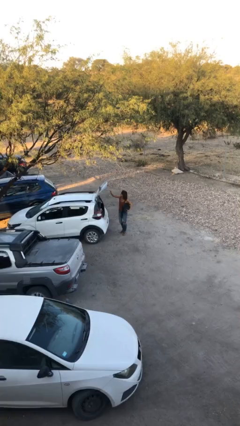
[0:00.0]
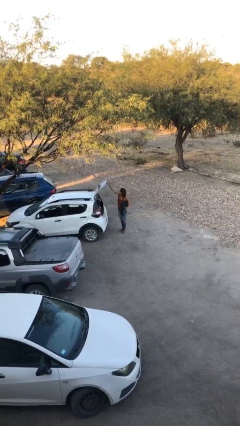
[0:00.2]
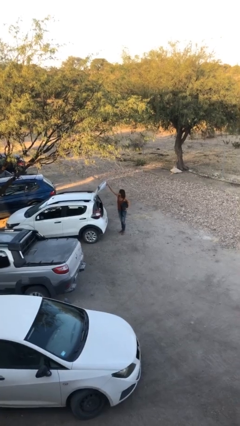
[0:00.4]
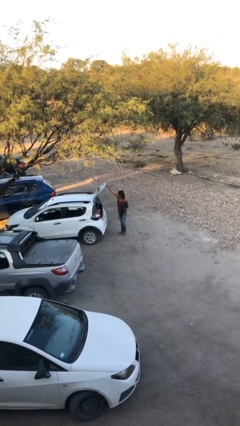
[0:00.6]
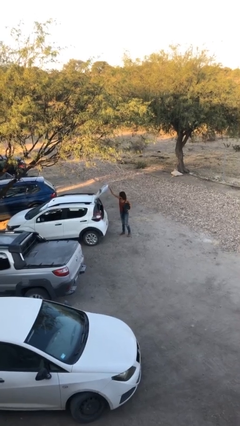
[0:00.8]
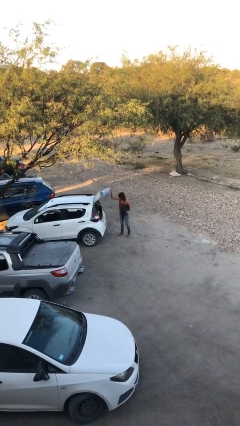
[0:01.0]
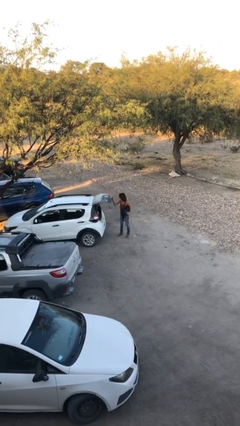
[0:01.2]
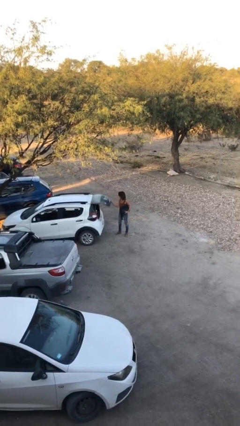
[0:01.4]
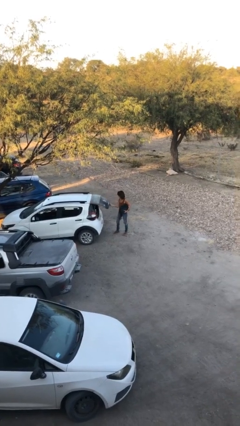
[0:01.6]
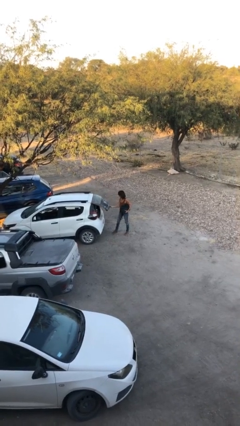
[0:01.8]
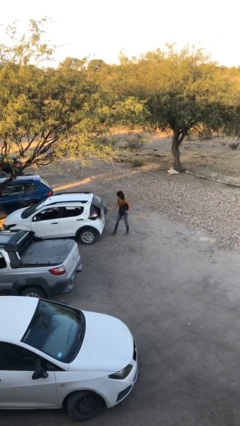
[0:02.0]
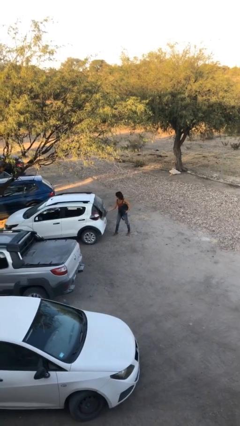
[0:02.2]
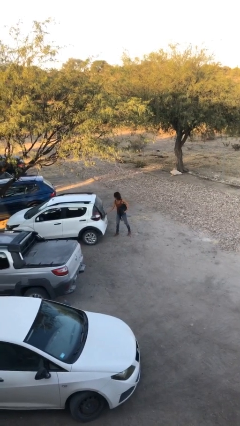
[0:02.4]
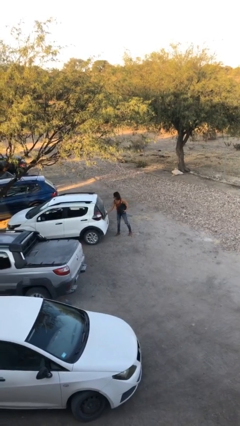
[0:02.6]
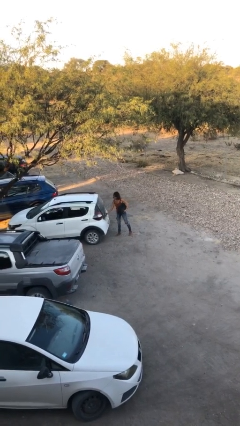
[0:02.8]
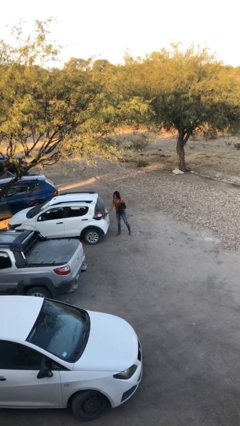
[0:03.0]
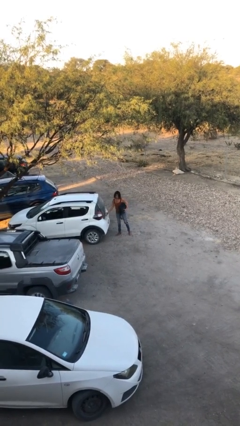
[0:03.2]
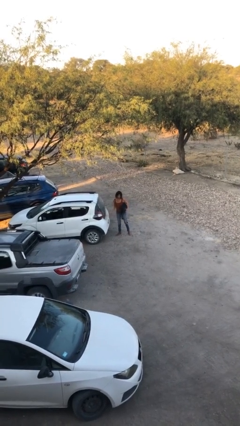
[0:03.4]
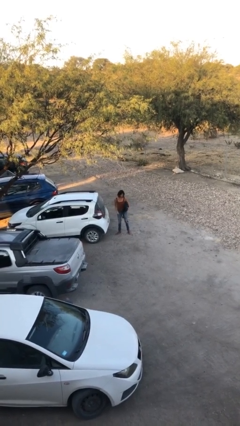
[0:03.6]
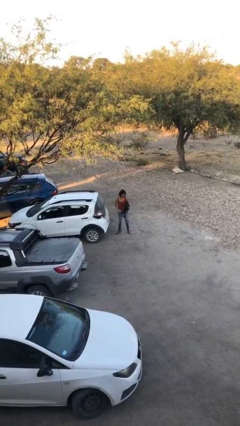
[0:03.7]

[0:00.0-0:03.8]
person closes car trunk

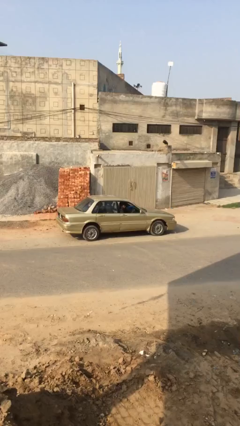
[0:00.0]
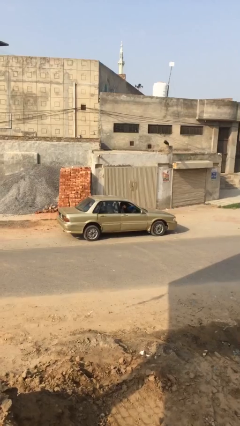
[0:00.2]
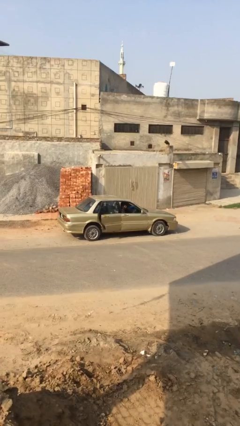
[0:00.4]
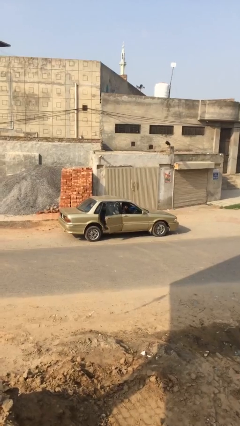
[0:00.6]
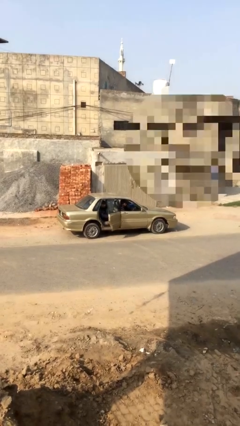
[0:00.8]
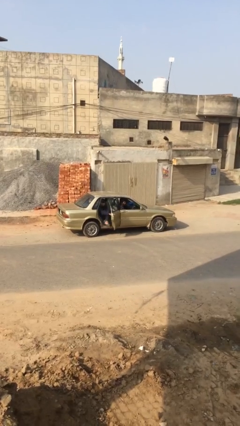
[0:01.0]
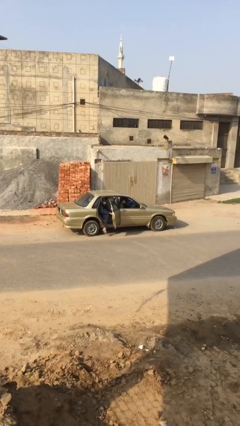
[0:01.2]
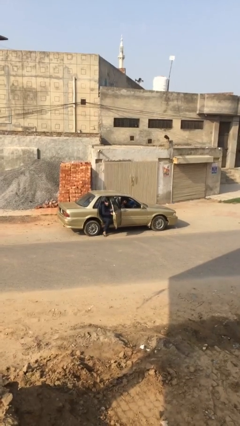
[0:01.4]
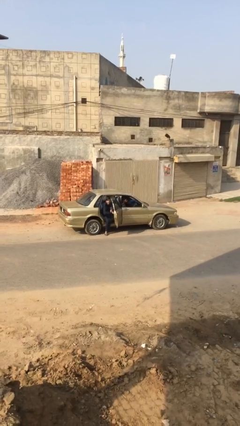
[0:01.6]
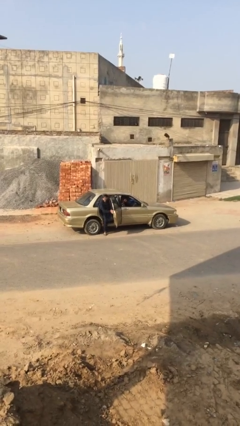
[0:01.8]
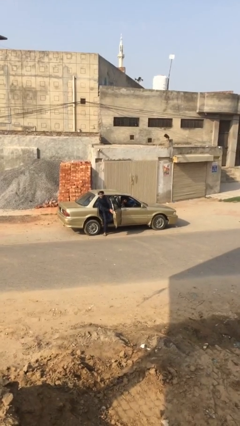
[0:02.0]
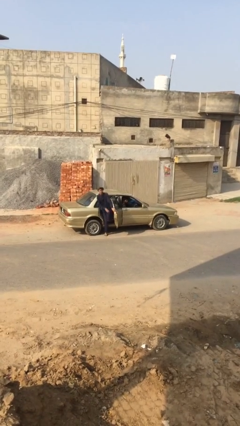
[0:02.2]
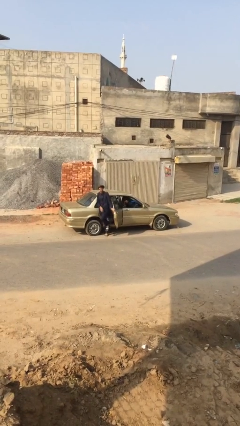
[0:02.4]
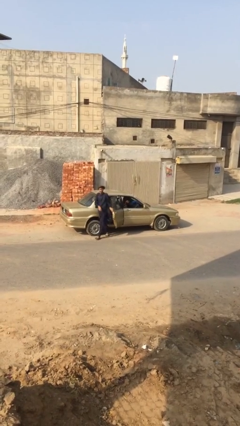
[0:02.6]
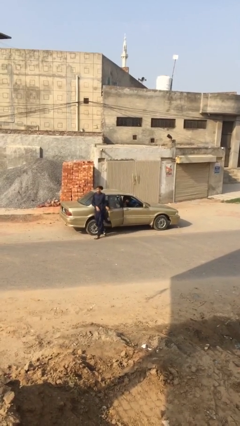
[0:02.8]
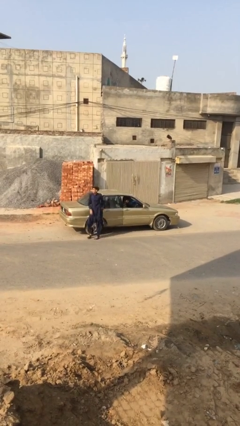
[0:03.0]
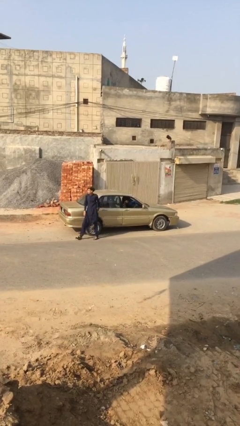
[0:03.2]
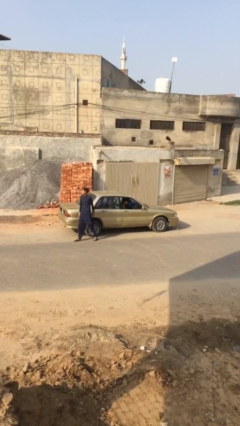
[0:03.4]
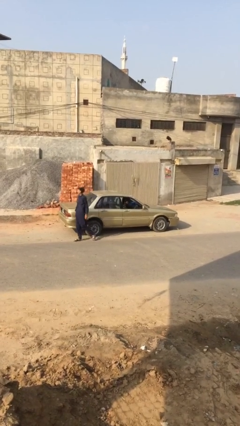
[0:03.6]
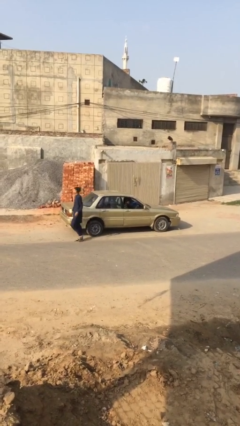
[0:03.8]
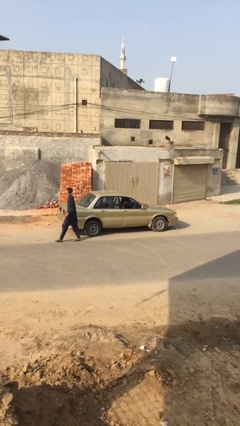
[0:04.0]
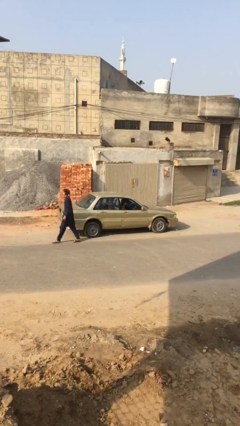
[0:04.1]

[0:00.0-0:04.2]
car drops off person

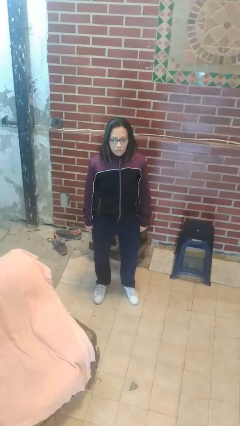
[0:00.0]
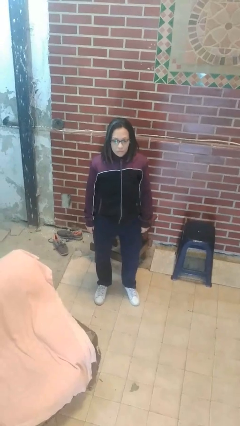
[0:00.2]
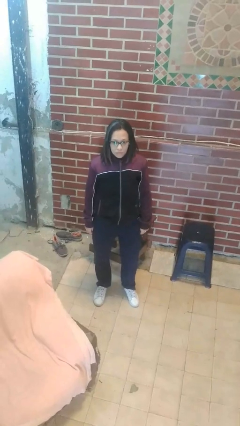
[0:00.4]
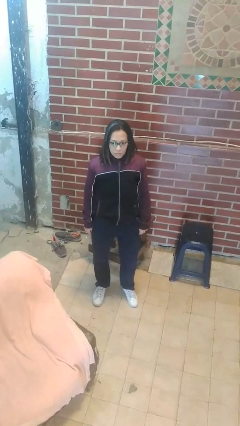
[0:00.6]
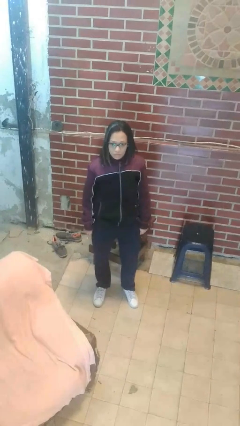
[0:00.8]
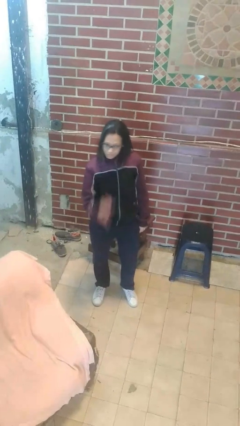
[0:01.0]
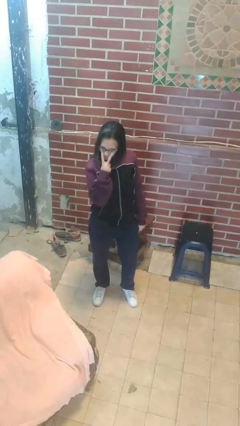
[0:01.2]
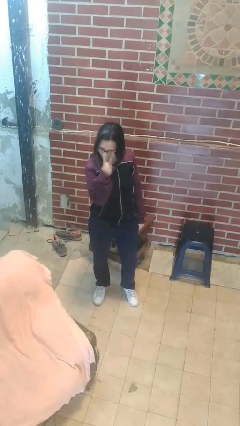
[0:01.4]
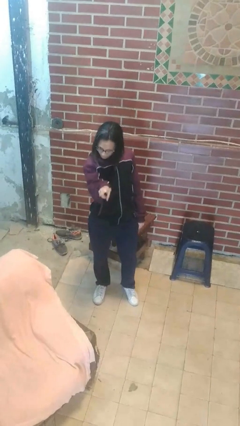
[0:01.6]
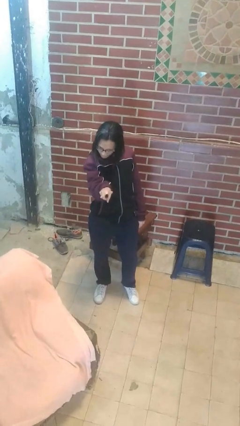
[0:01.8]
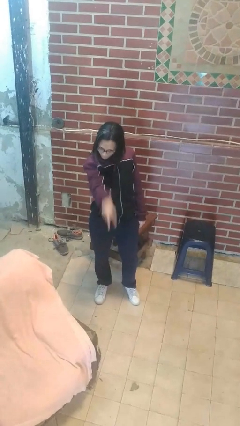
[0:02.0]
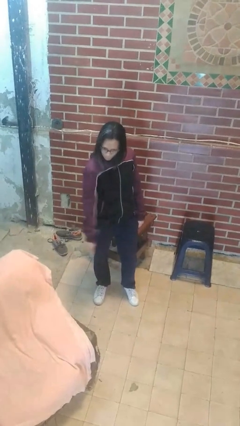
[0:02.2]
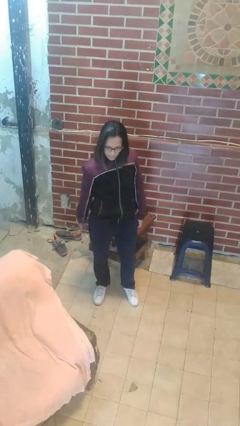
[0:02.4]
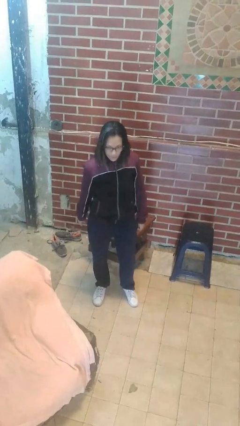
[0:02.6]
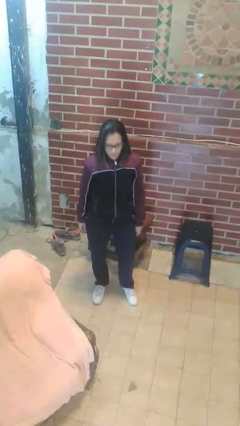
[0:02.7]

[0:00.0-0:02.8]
person gestures watch closely

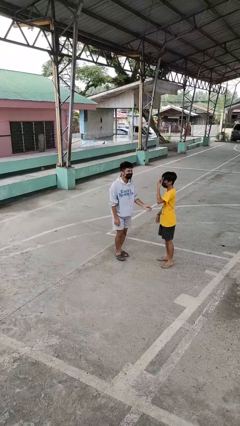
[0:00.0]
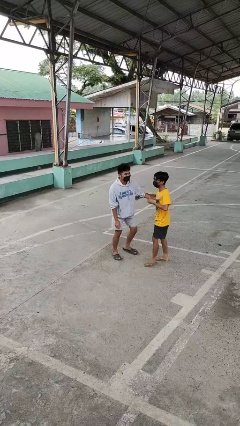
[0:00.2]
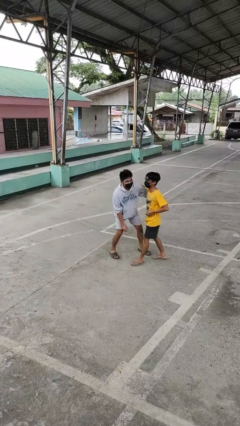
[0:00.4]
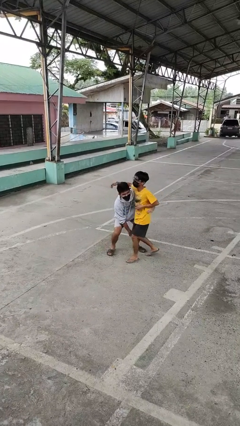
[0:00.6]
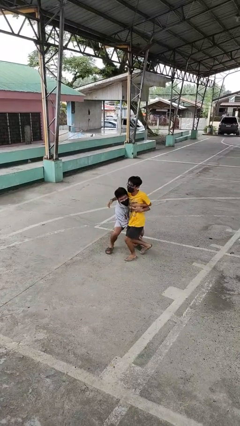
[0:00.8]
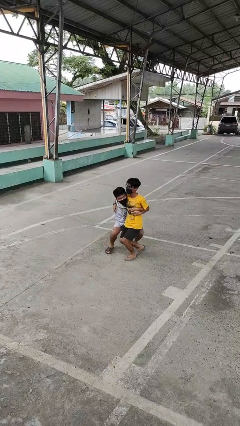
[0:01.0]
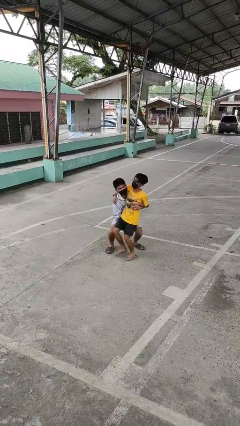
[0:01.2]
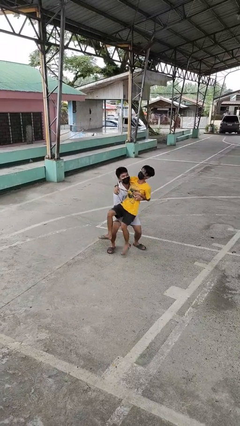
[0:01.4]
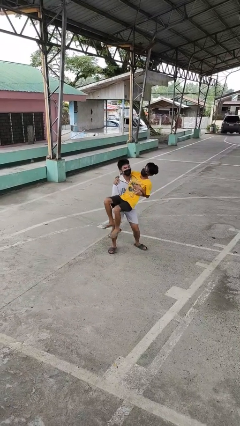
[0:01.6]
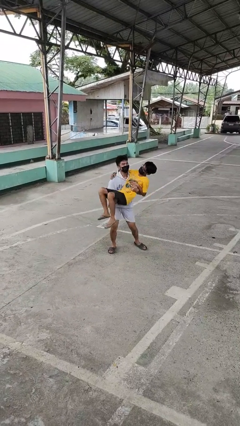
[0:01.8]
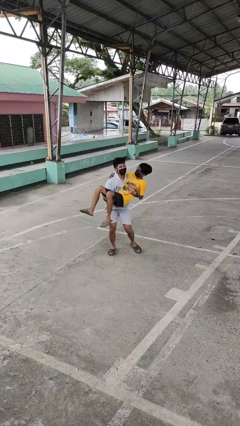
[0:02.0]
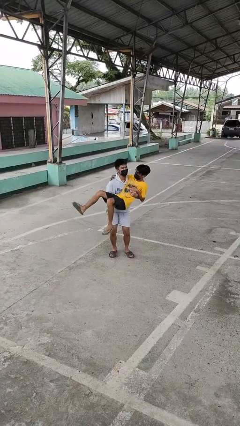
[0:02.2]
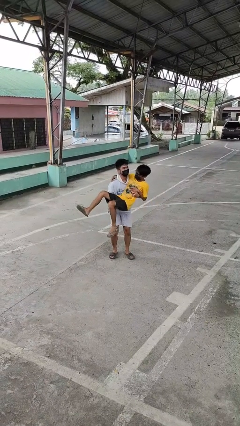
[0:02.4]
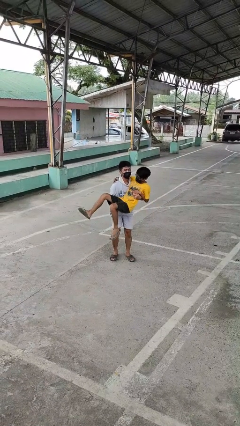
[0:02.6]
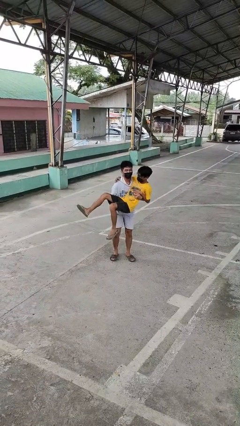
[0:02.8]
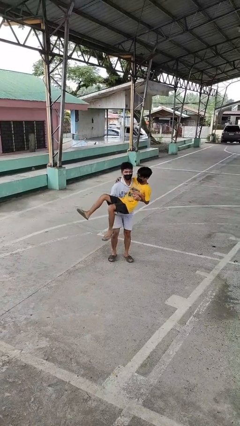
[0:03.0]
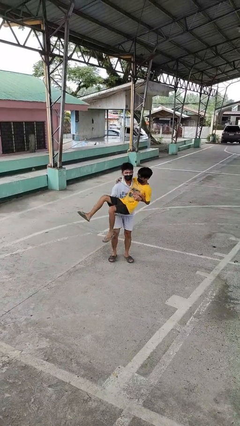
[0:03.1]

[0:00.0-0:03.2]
person picks up person

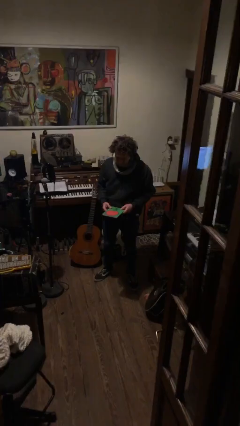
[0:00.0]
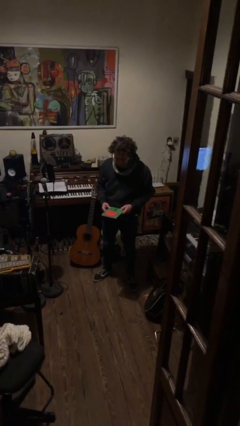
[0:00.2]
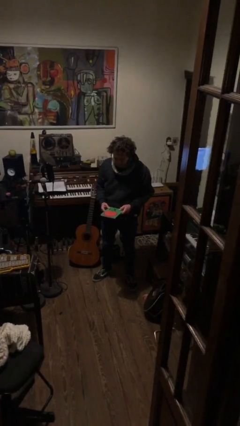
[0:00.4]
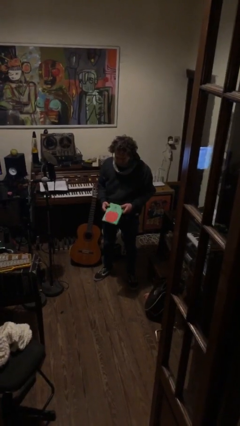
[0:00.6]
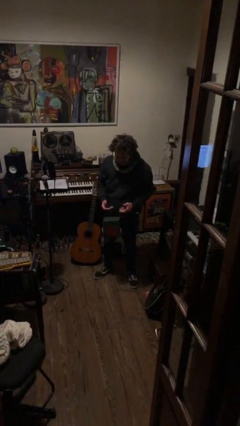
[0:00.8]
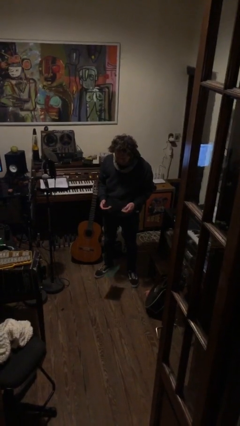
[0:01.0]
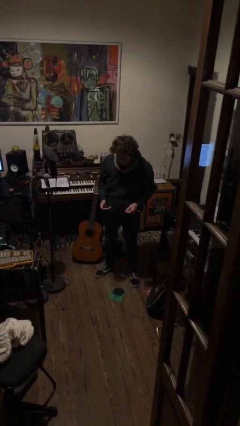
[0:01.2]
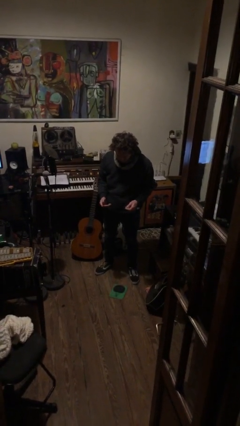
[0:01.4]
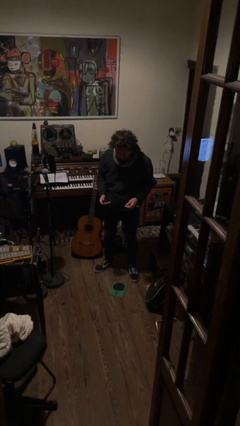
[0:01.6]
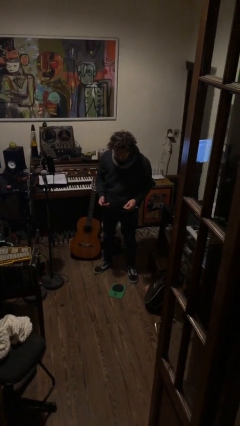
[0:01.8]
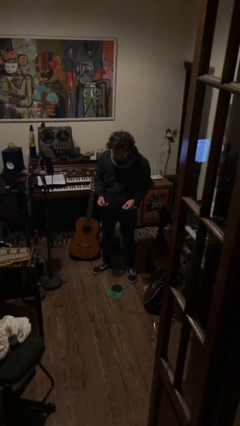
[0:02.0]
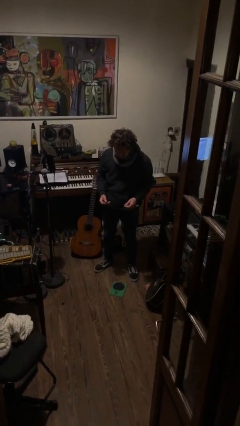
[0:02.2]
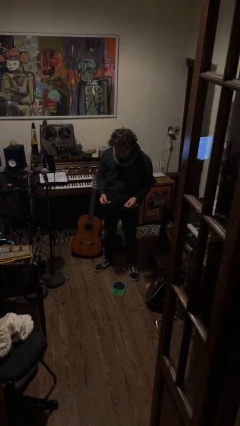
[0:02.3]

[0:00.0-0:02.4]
person drops object

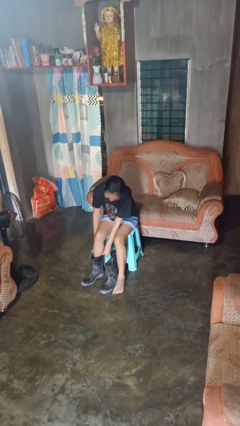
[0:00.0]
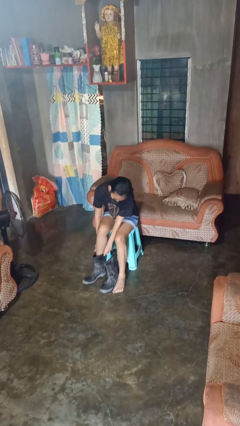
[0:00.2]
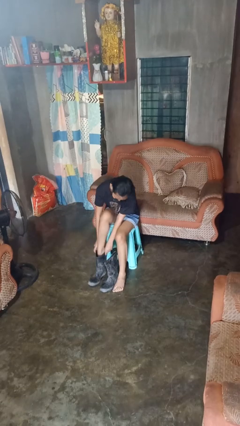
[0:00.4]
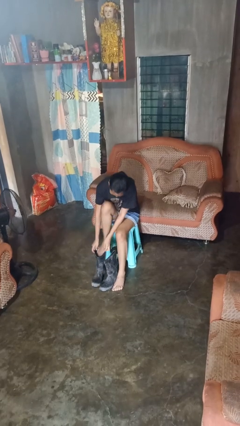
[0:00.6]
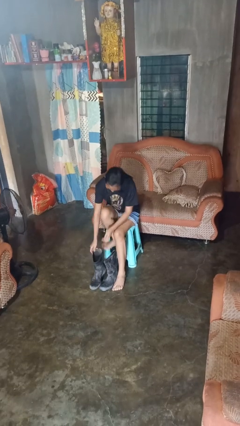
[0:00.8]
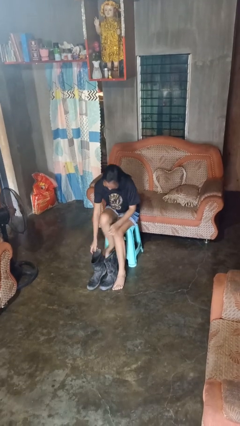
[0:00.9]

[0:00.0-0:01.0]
person takes off boots

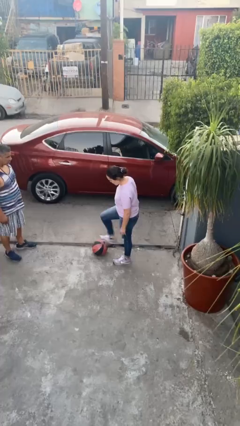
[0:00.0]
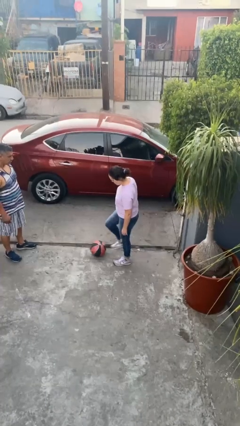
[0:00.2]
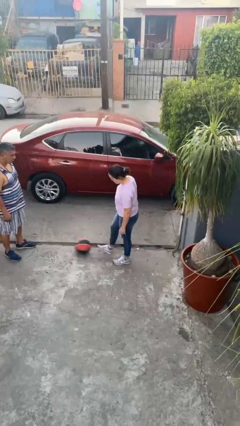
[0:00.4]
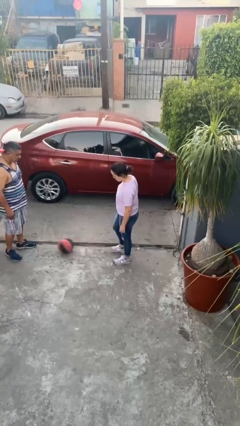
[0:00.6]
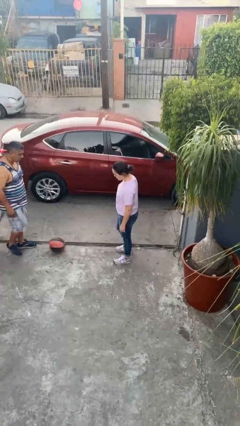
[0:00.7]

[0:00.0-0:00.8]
person kicks object to person
